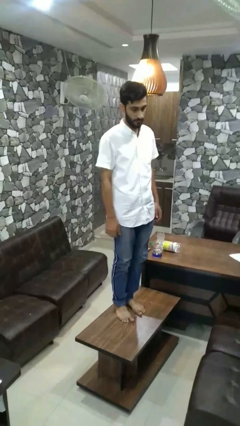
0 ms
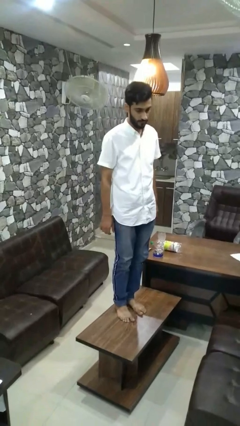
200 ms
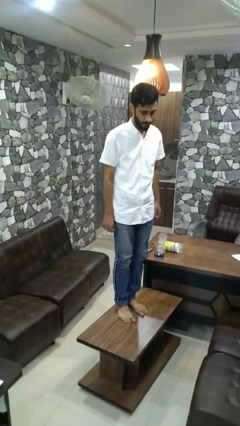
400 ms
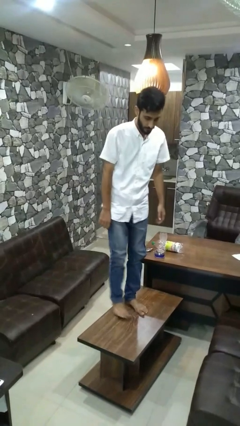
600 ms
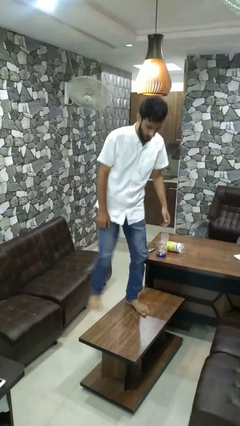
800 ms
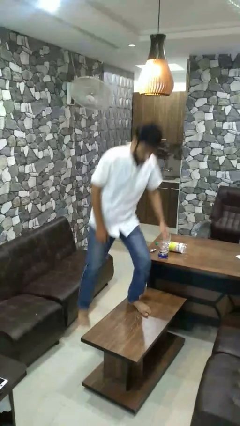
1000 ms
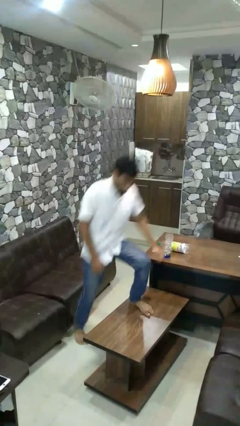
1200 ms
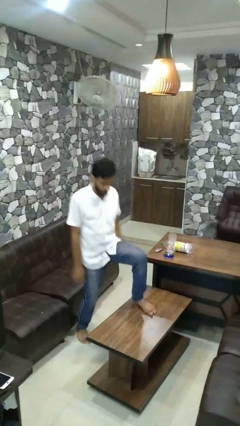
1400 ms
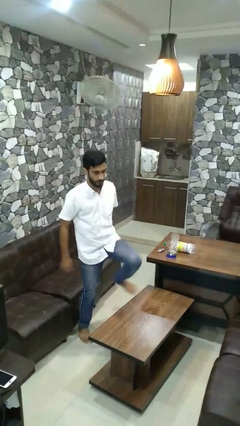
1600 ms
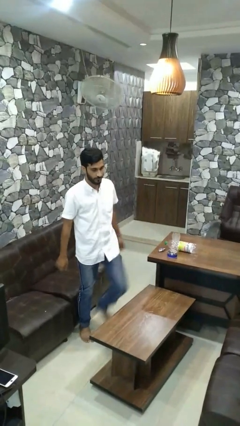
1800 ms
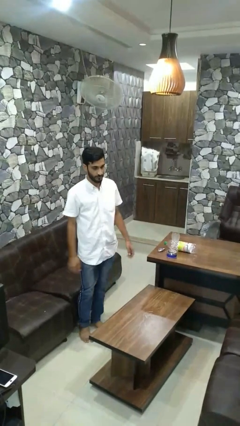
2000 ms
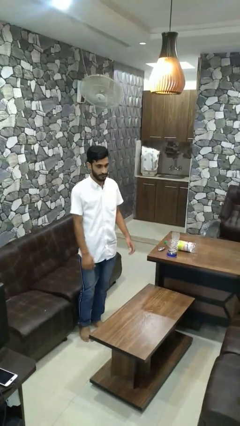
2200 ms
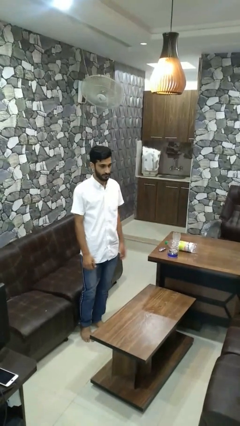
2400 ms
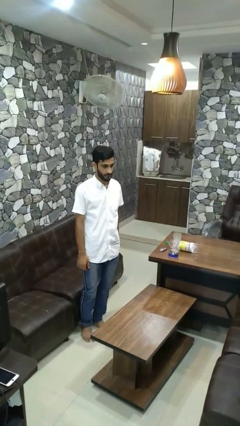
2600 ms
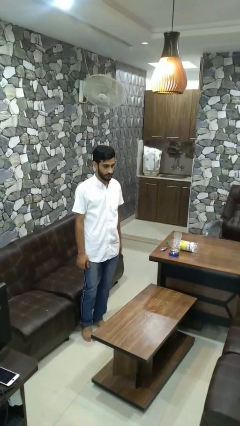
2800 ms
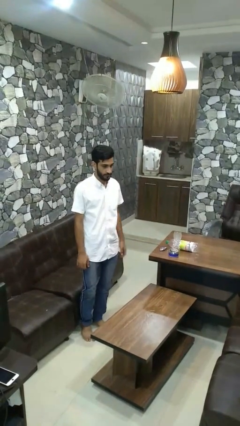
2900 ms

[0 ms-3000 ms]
person climbs off table

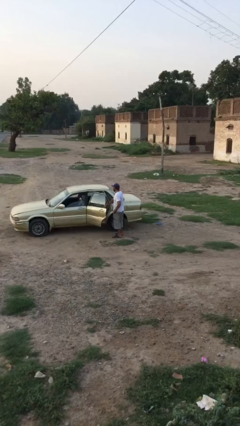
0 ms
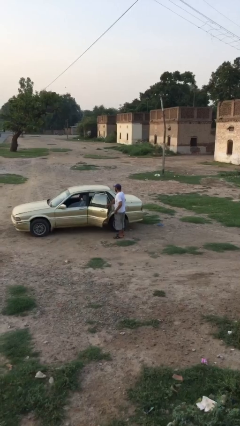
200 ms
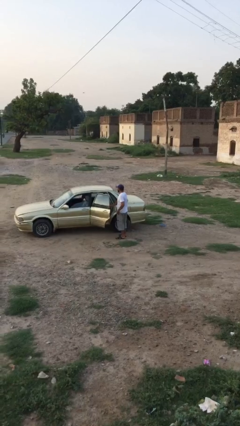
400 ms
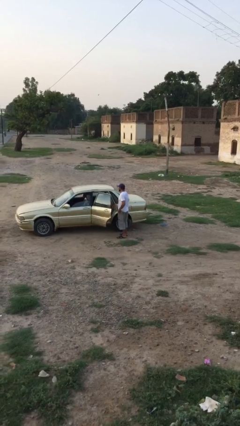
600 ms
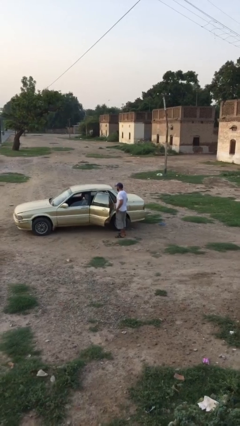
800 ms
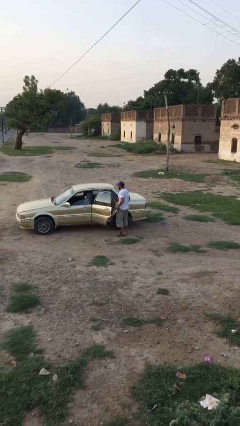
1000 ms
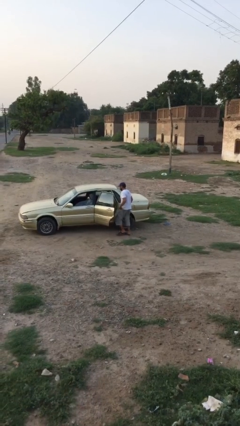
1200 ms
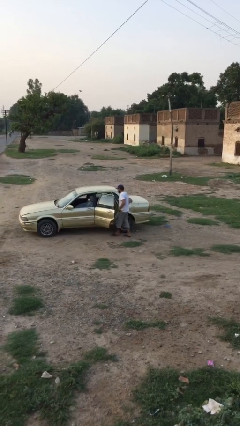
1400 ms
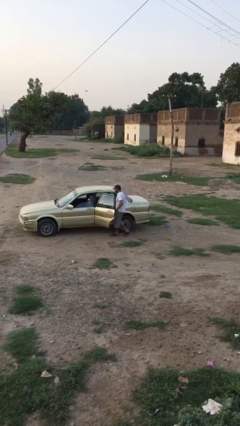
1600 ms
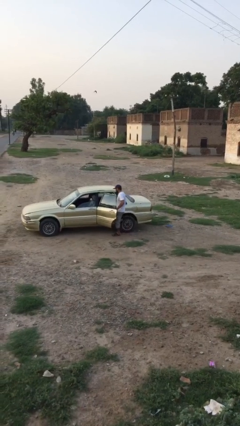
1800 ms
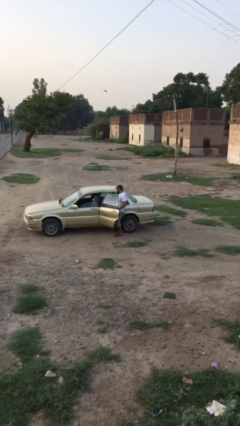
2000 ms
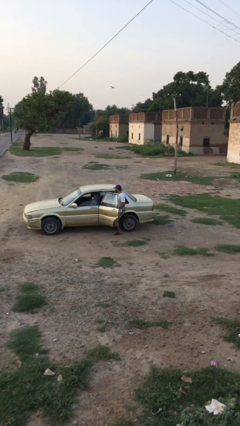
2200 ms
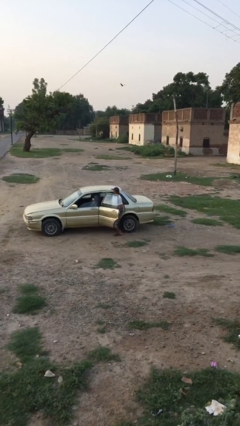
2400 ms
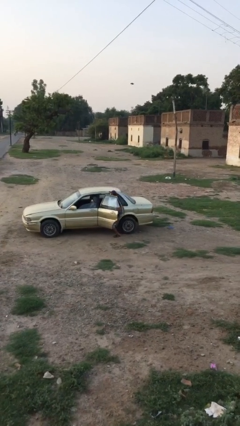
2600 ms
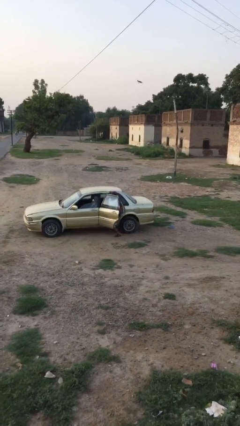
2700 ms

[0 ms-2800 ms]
person enters car

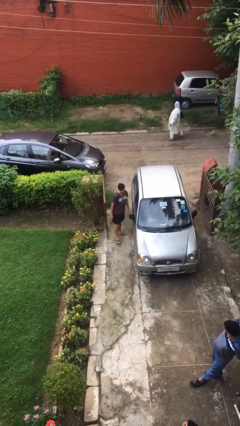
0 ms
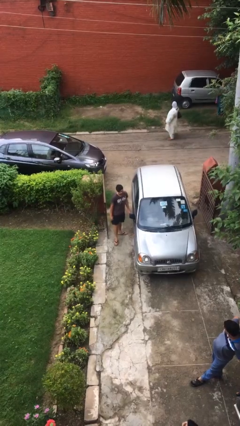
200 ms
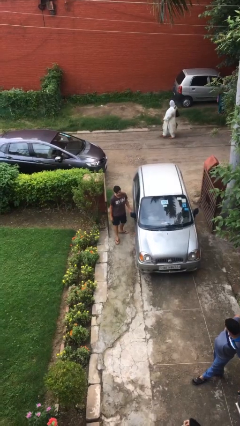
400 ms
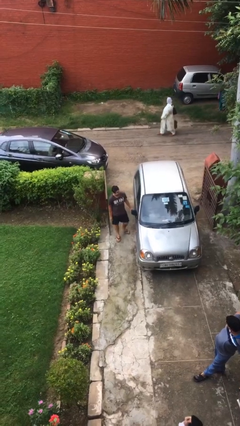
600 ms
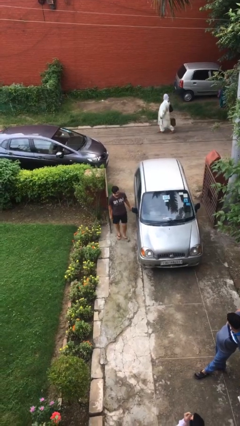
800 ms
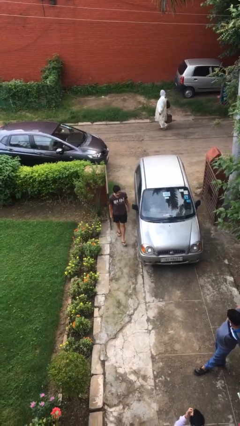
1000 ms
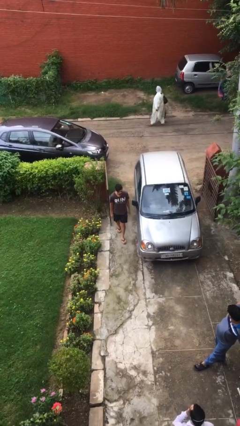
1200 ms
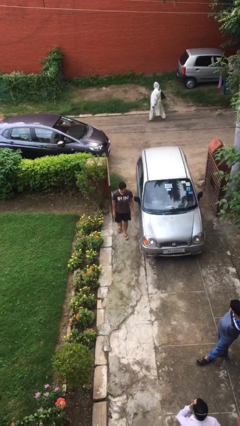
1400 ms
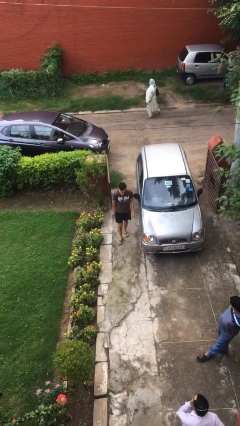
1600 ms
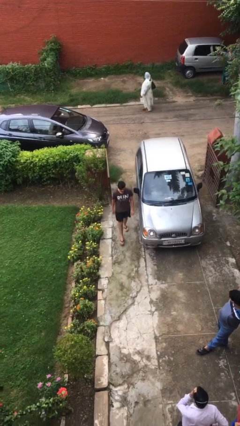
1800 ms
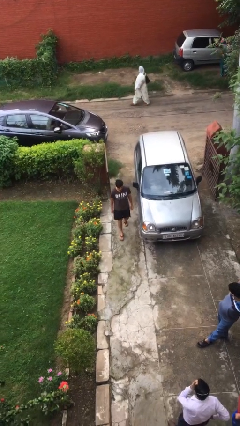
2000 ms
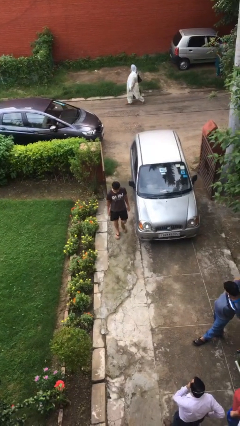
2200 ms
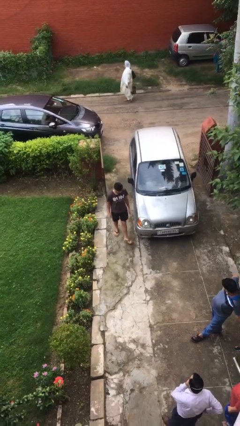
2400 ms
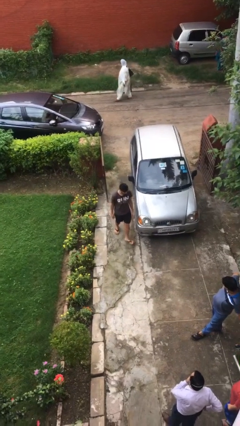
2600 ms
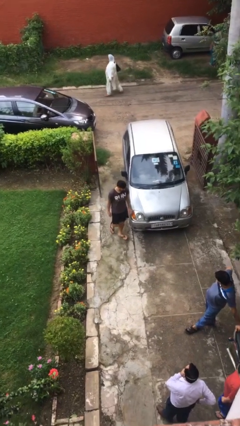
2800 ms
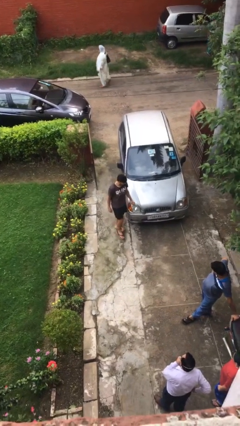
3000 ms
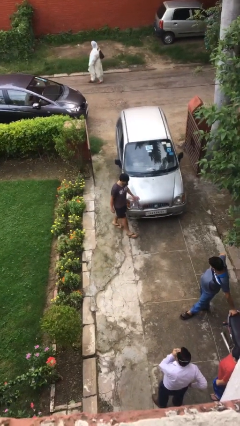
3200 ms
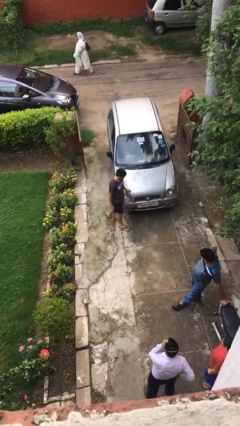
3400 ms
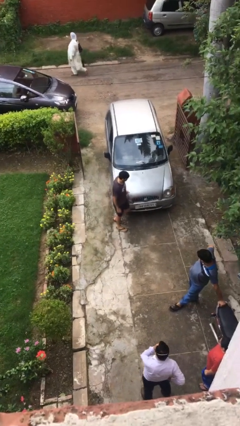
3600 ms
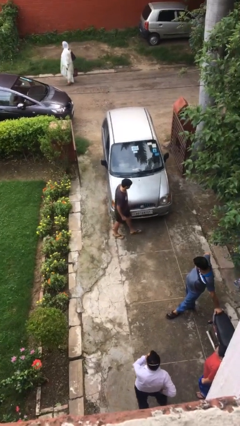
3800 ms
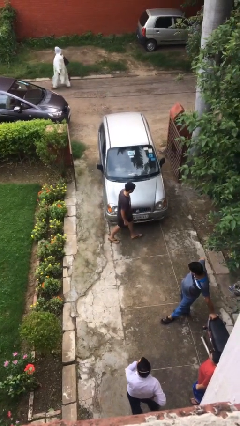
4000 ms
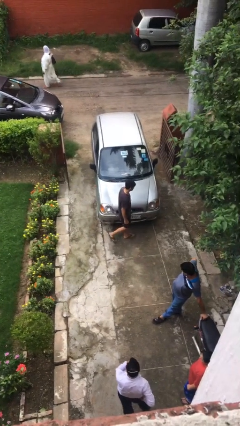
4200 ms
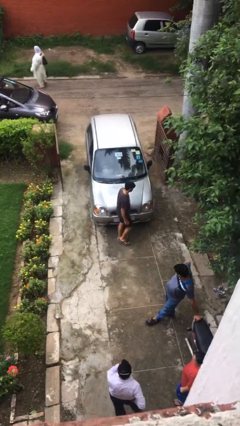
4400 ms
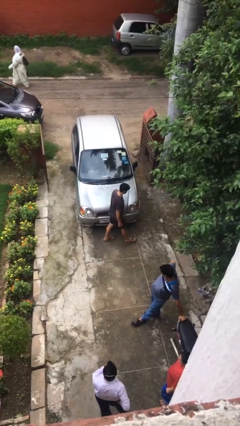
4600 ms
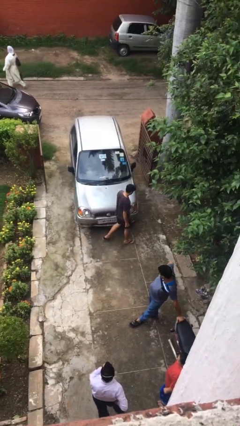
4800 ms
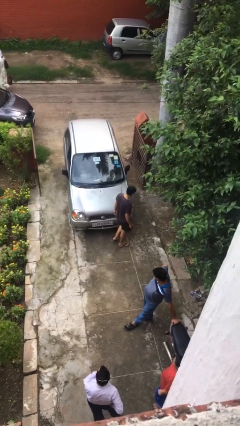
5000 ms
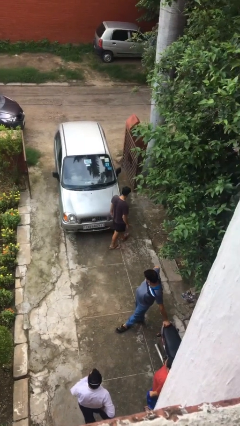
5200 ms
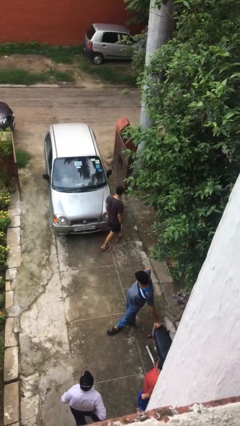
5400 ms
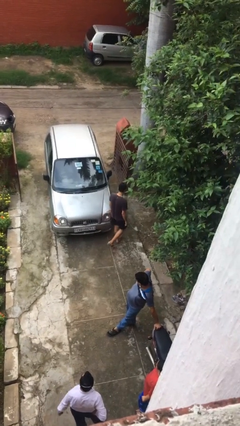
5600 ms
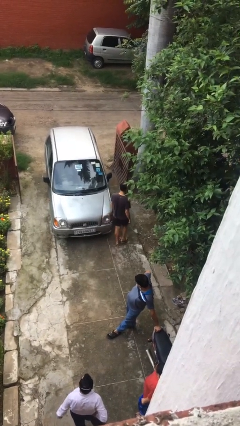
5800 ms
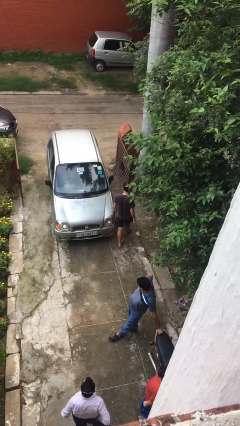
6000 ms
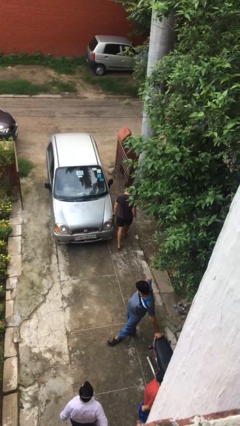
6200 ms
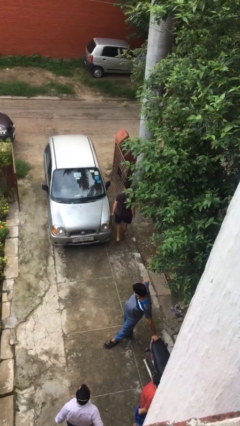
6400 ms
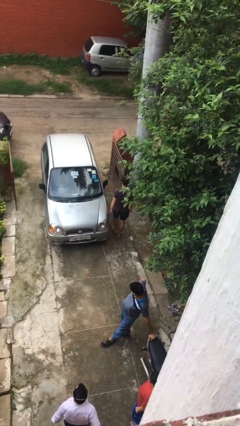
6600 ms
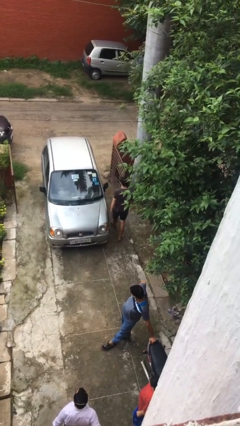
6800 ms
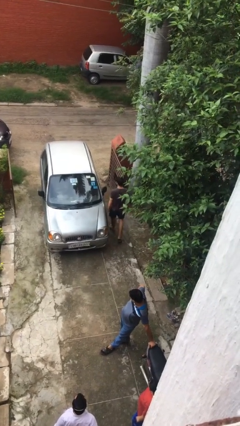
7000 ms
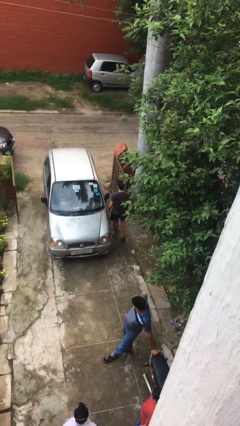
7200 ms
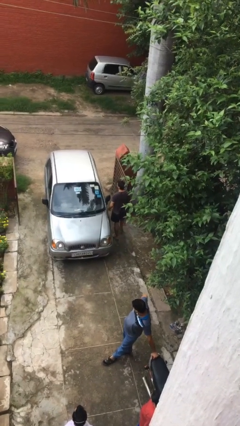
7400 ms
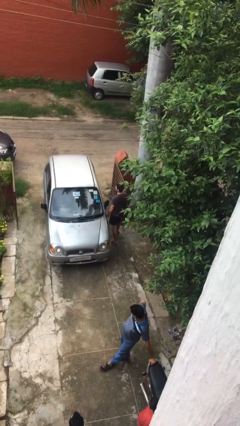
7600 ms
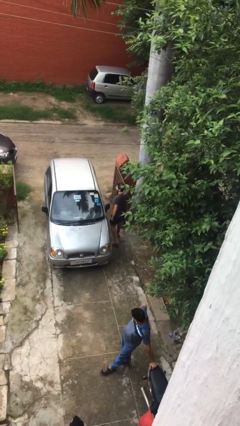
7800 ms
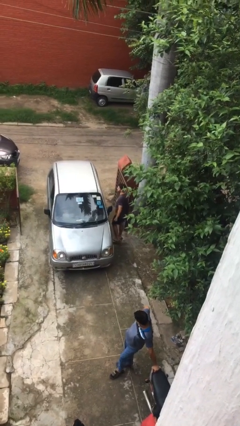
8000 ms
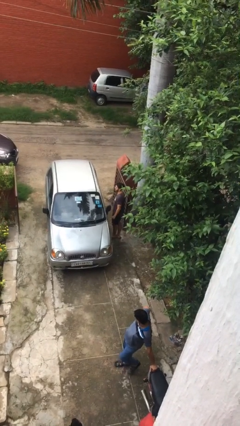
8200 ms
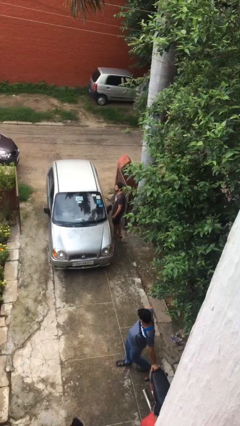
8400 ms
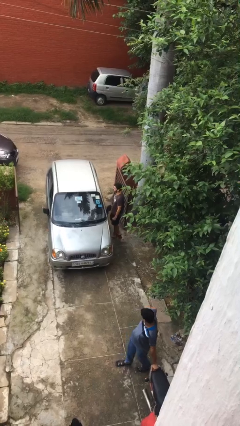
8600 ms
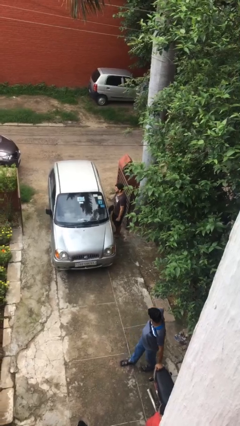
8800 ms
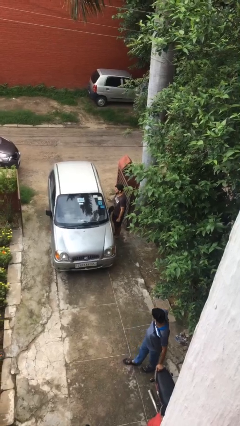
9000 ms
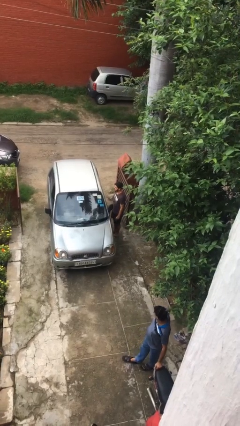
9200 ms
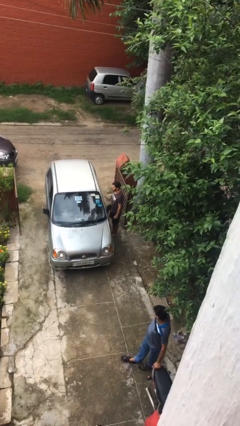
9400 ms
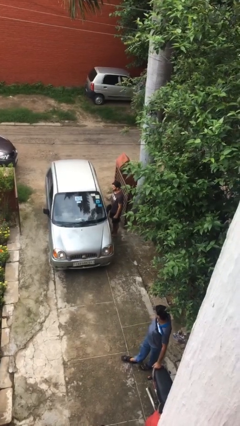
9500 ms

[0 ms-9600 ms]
person walks around car

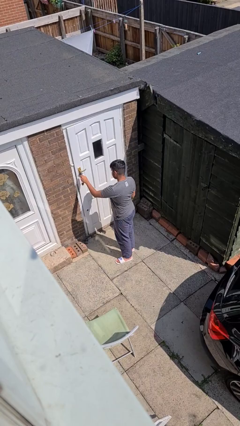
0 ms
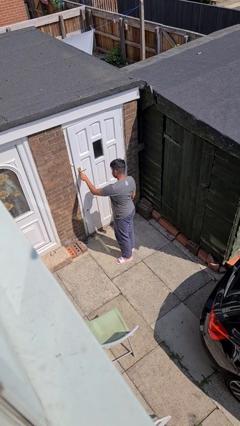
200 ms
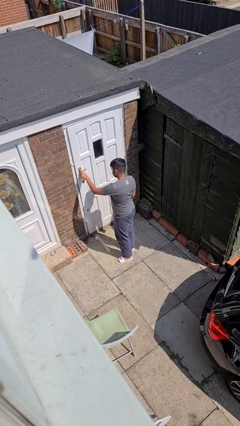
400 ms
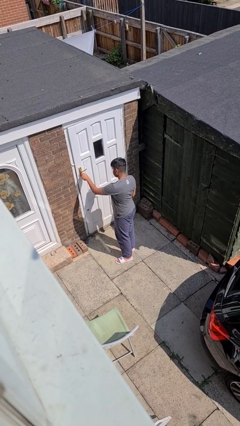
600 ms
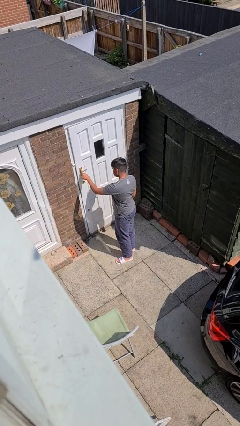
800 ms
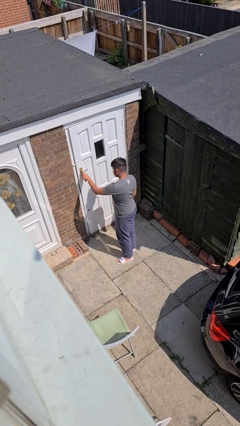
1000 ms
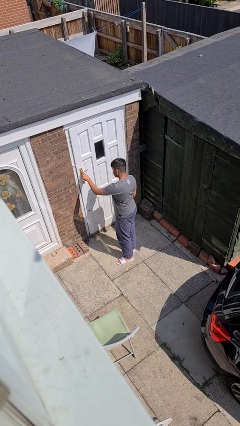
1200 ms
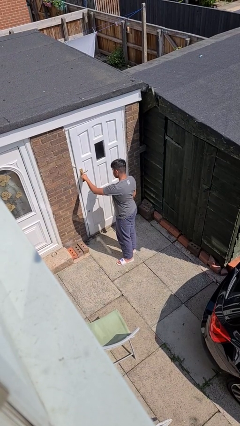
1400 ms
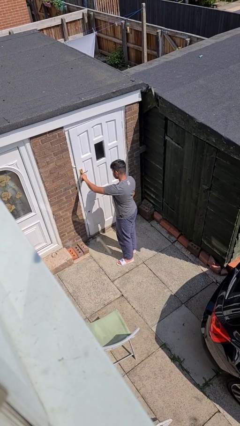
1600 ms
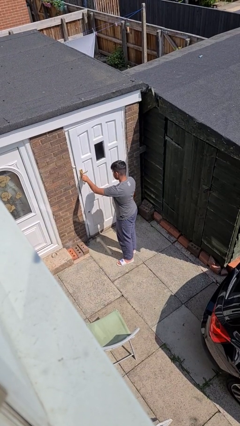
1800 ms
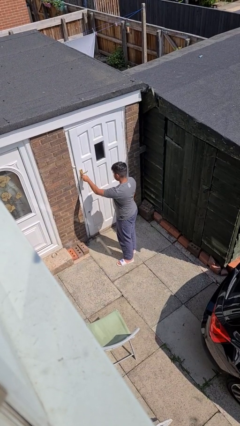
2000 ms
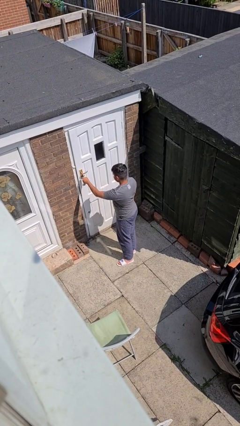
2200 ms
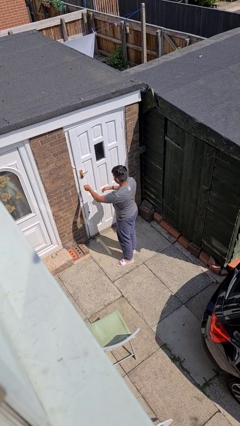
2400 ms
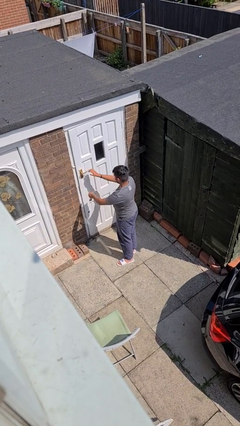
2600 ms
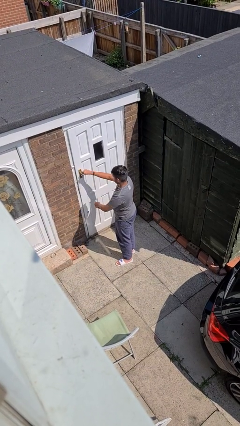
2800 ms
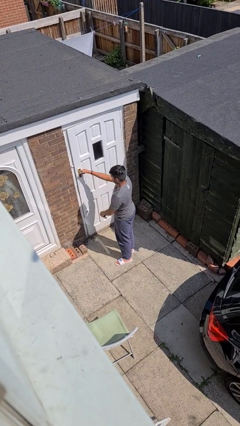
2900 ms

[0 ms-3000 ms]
person unlocks door with keys
